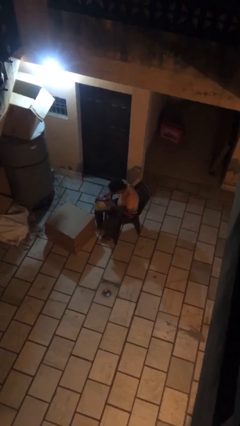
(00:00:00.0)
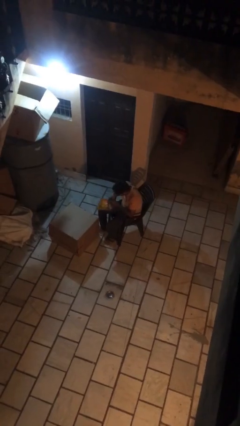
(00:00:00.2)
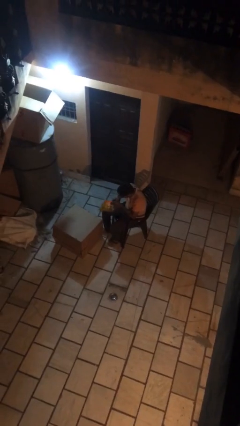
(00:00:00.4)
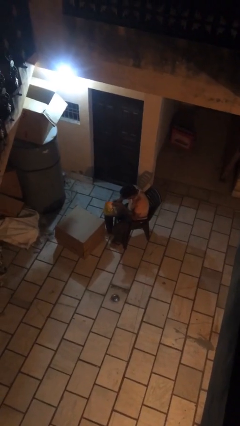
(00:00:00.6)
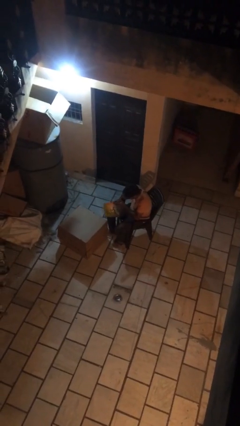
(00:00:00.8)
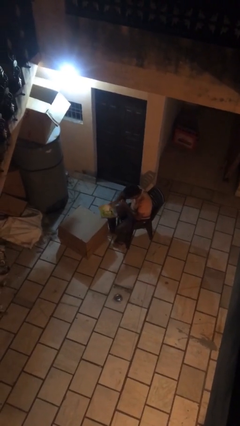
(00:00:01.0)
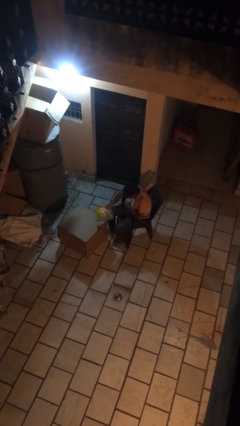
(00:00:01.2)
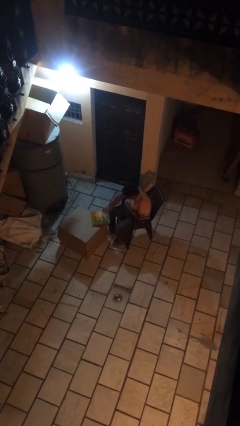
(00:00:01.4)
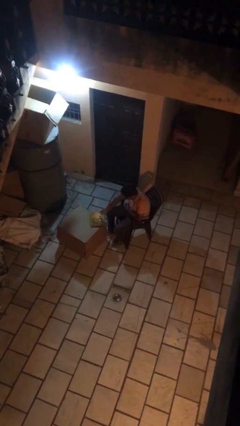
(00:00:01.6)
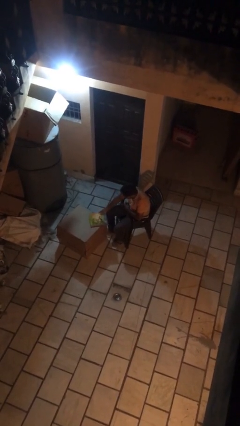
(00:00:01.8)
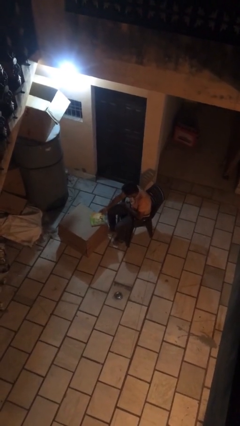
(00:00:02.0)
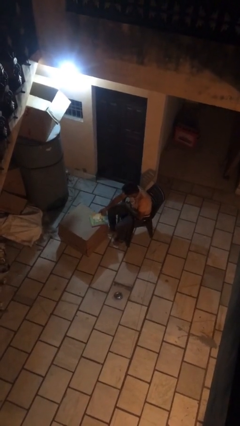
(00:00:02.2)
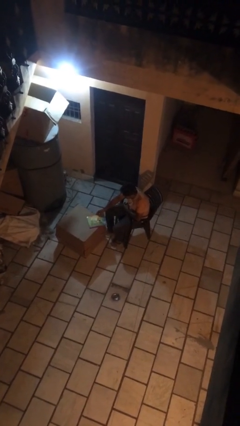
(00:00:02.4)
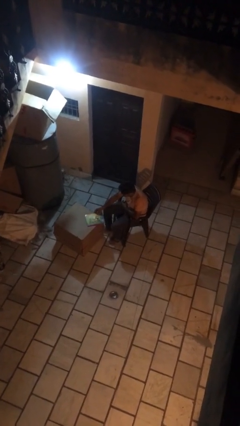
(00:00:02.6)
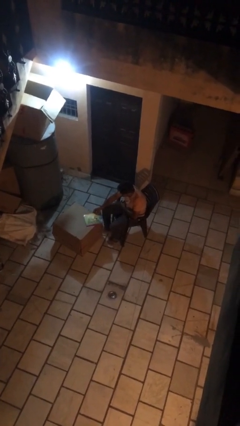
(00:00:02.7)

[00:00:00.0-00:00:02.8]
person puts down object on table

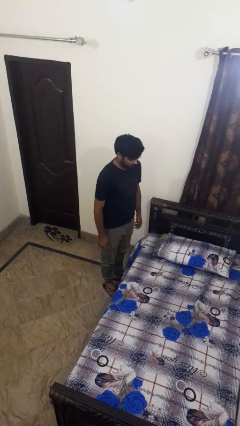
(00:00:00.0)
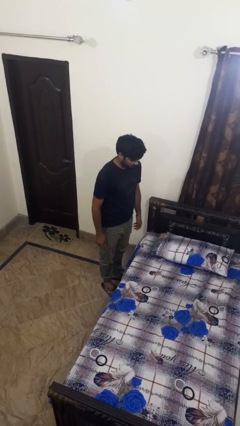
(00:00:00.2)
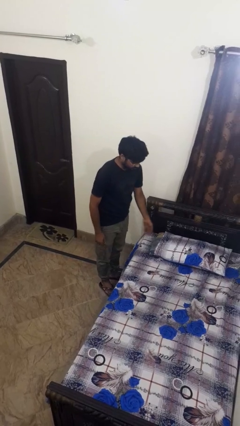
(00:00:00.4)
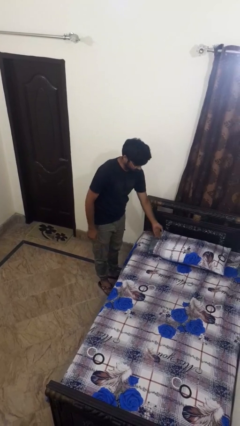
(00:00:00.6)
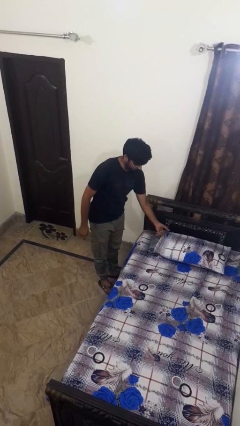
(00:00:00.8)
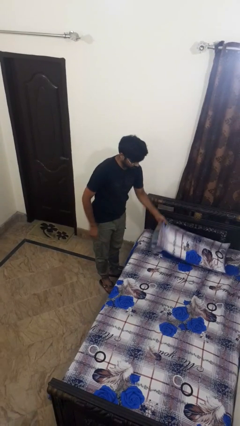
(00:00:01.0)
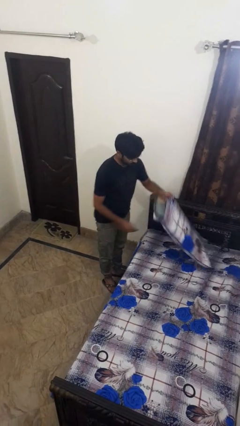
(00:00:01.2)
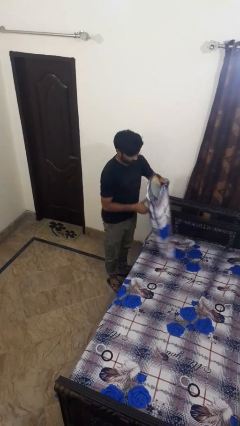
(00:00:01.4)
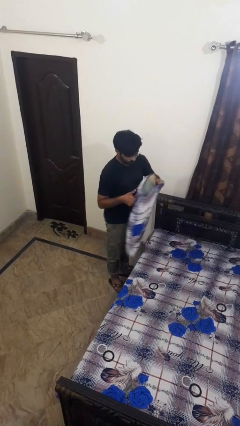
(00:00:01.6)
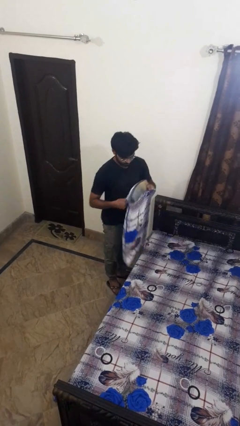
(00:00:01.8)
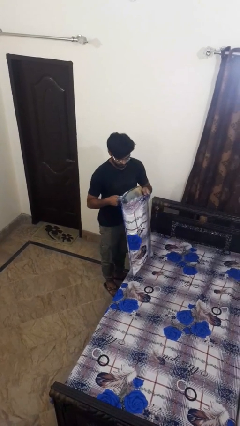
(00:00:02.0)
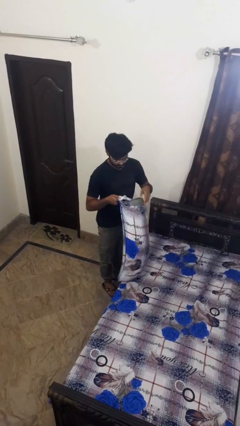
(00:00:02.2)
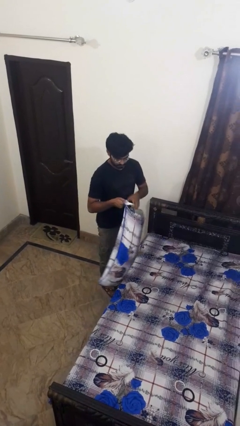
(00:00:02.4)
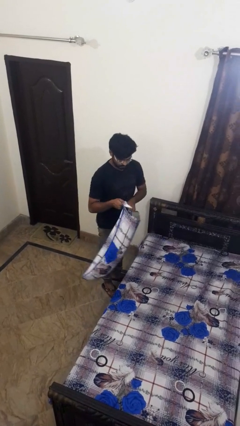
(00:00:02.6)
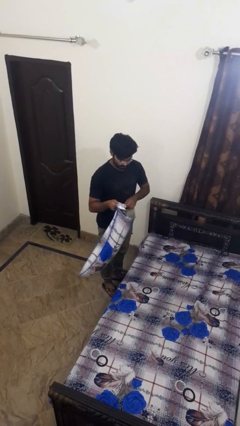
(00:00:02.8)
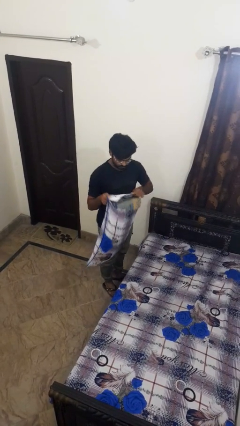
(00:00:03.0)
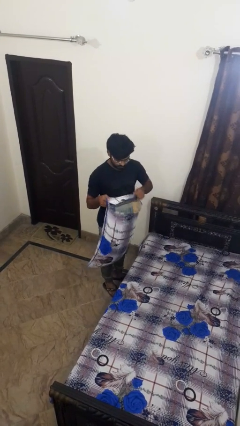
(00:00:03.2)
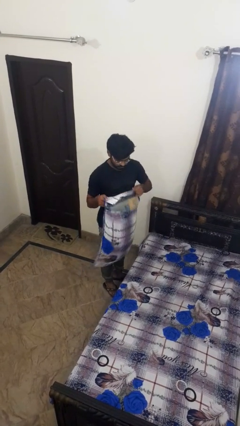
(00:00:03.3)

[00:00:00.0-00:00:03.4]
person picks up object from bed

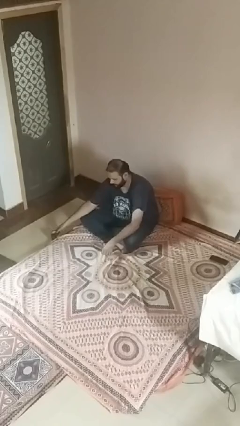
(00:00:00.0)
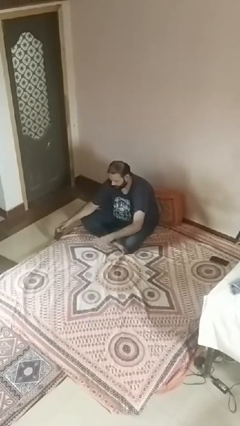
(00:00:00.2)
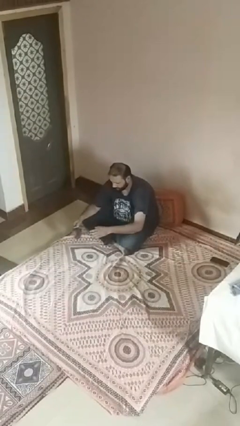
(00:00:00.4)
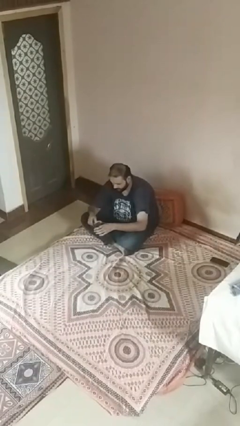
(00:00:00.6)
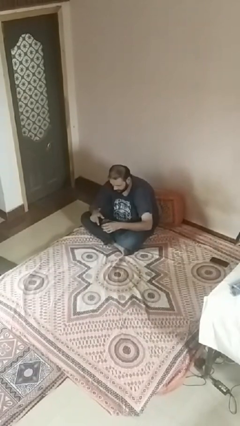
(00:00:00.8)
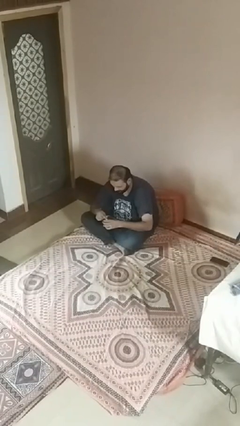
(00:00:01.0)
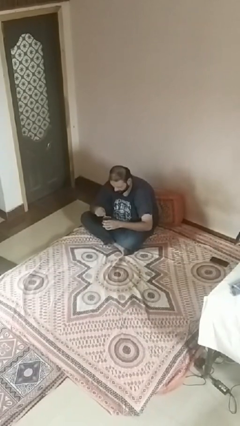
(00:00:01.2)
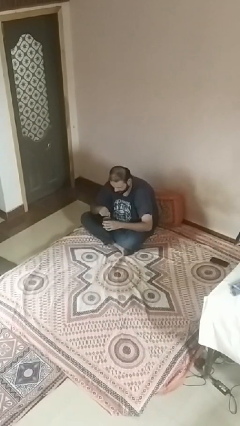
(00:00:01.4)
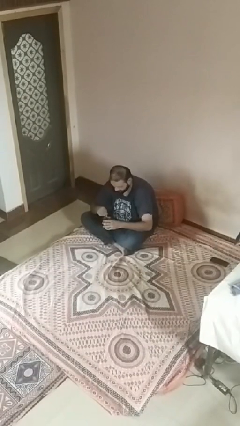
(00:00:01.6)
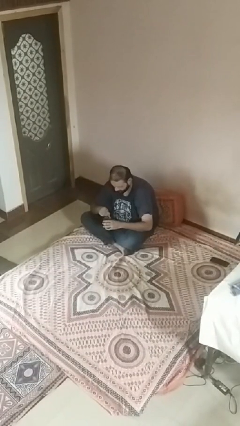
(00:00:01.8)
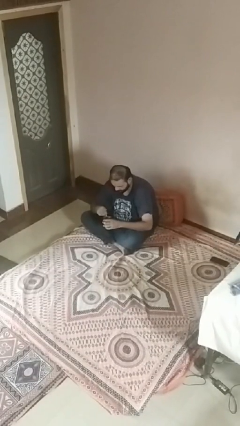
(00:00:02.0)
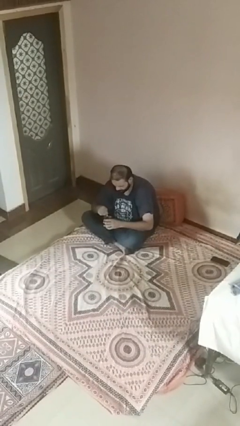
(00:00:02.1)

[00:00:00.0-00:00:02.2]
person stirs mug

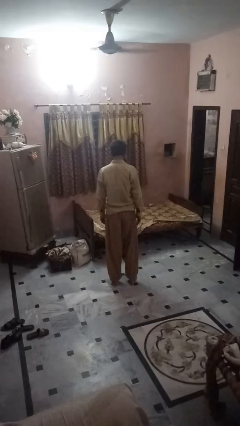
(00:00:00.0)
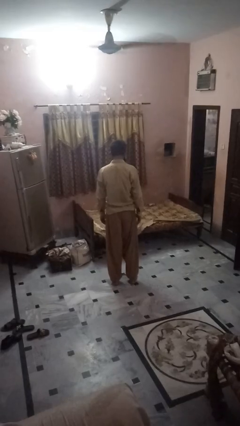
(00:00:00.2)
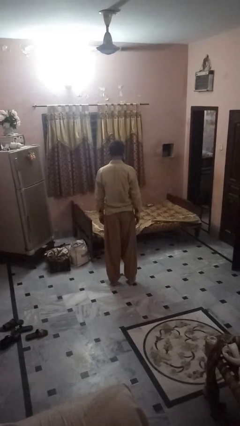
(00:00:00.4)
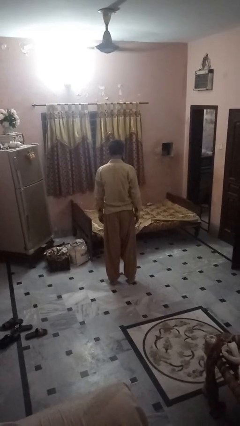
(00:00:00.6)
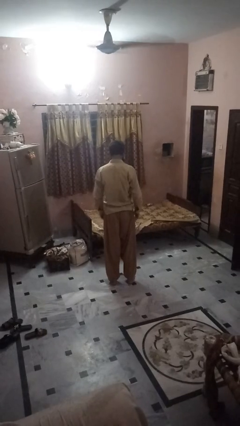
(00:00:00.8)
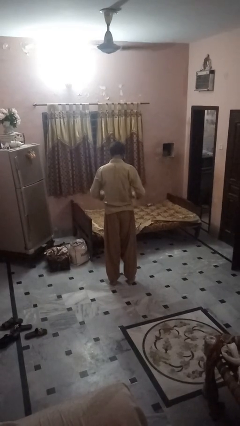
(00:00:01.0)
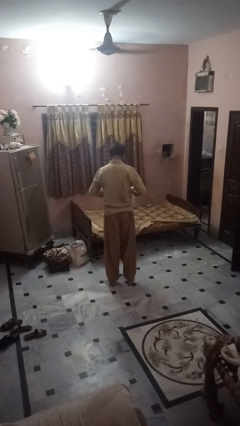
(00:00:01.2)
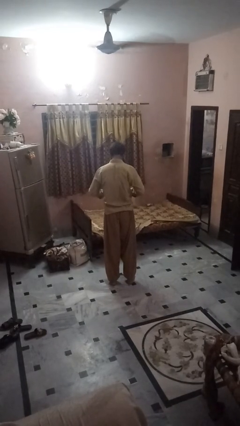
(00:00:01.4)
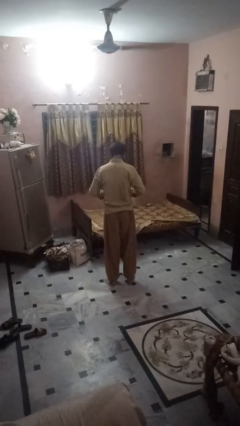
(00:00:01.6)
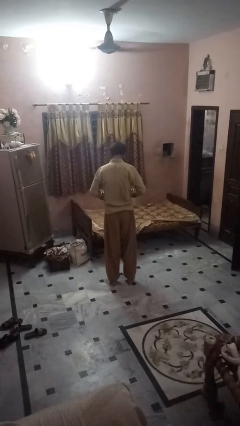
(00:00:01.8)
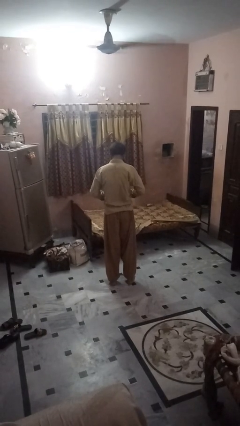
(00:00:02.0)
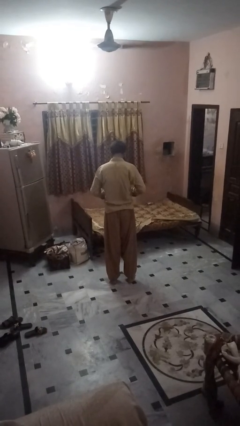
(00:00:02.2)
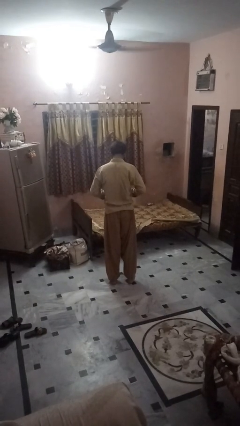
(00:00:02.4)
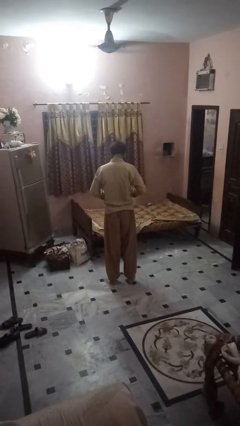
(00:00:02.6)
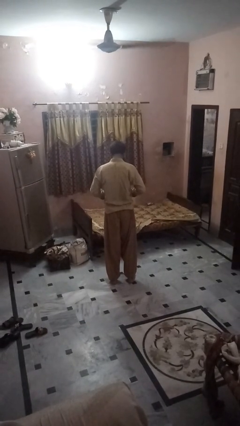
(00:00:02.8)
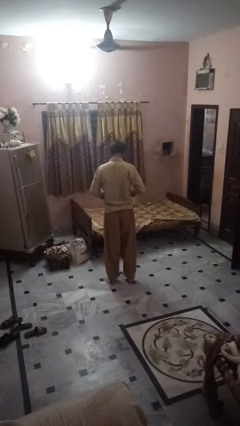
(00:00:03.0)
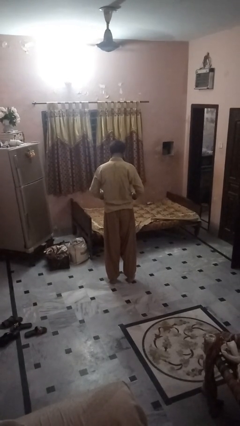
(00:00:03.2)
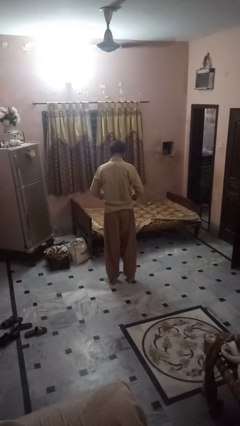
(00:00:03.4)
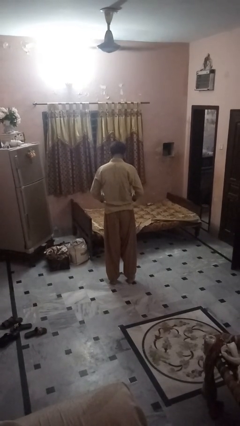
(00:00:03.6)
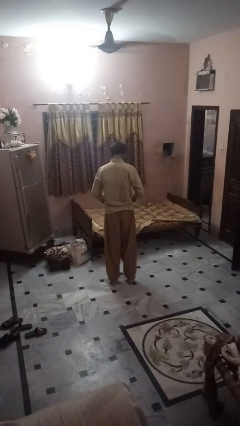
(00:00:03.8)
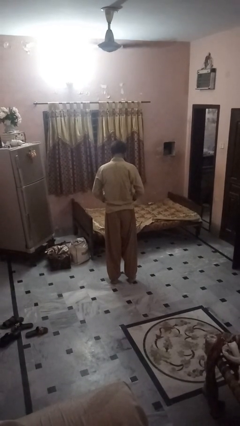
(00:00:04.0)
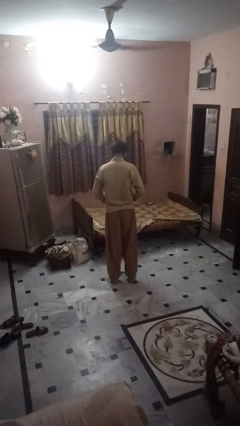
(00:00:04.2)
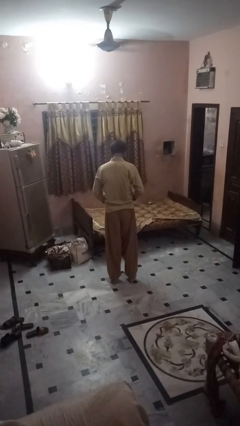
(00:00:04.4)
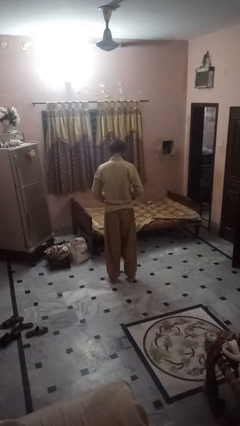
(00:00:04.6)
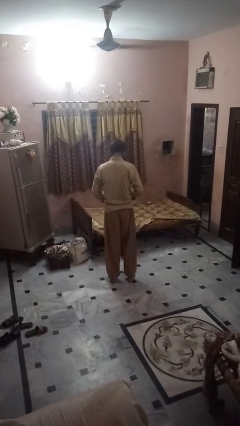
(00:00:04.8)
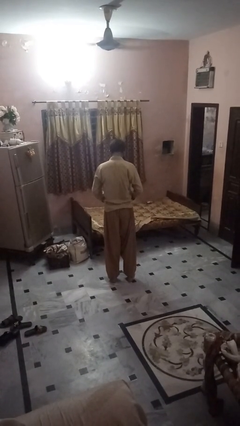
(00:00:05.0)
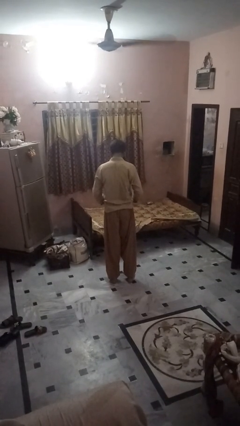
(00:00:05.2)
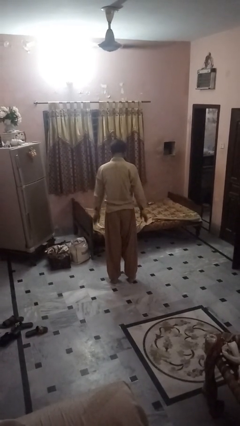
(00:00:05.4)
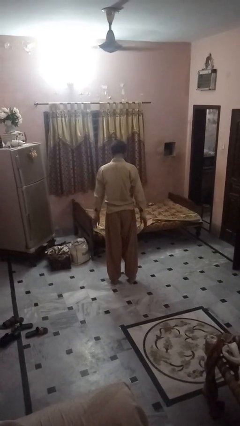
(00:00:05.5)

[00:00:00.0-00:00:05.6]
person buttons shirt

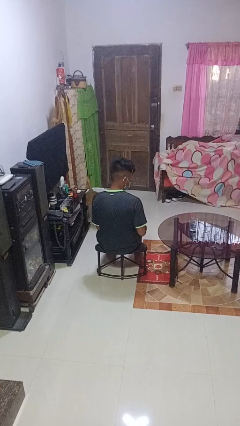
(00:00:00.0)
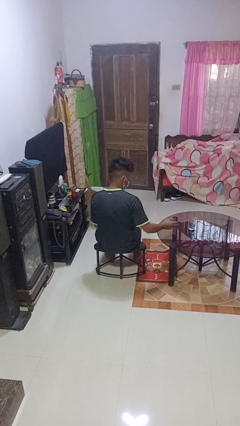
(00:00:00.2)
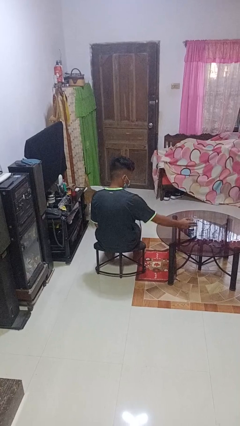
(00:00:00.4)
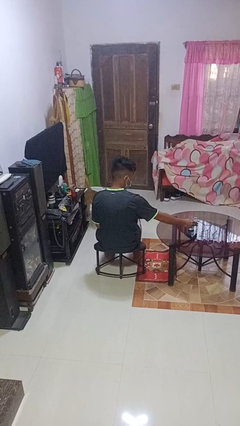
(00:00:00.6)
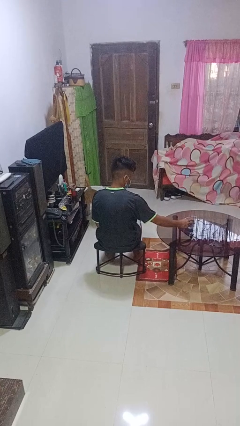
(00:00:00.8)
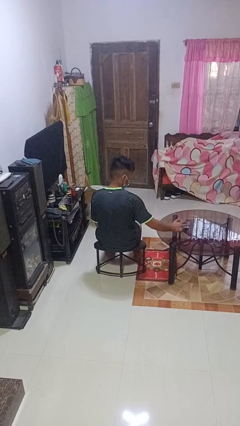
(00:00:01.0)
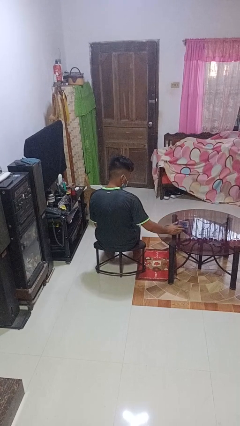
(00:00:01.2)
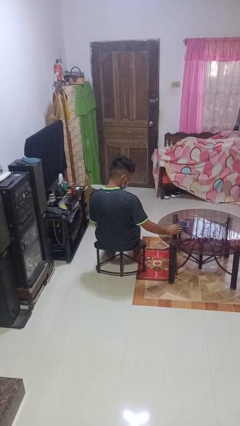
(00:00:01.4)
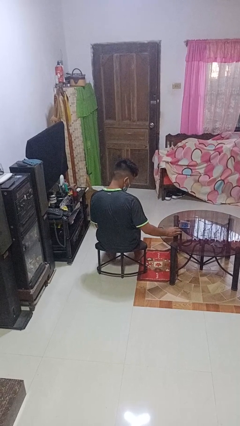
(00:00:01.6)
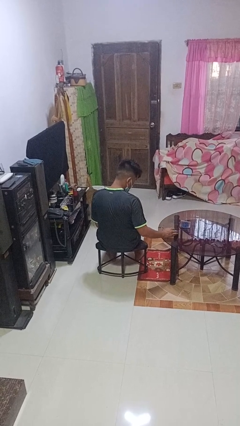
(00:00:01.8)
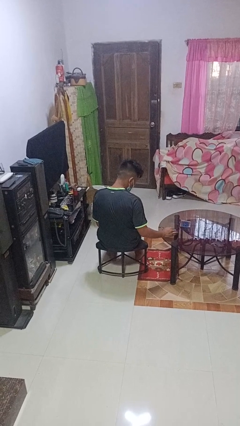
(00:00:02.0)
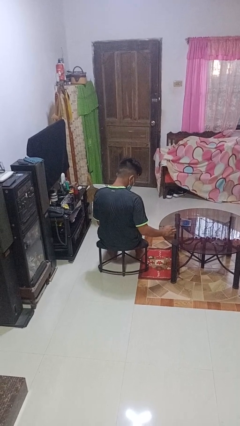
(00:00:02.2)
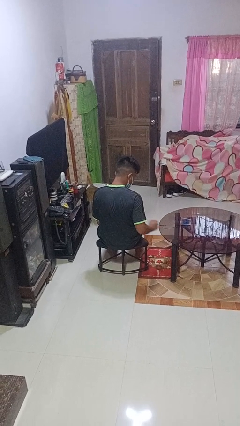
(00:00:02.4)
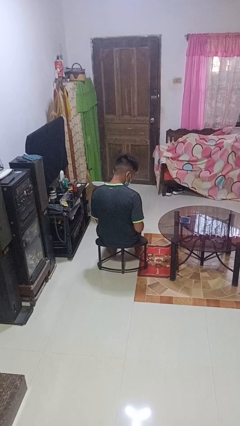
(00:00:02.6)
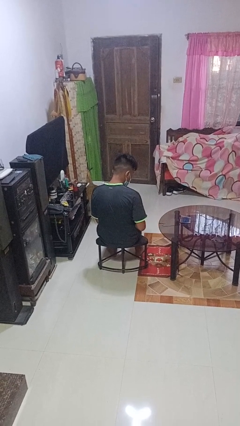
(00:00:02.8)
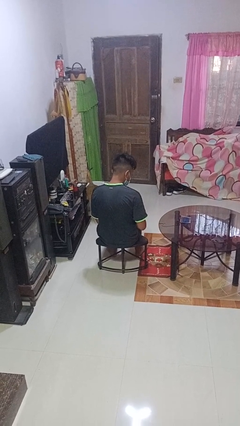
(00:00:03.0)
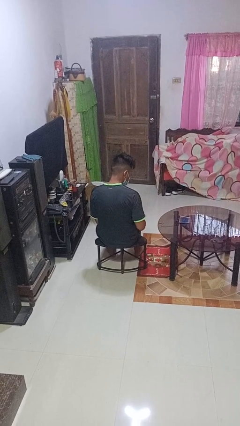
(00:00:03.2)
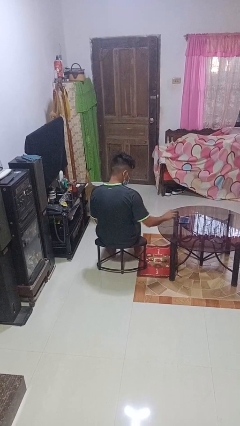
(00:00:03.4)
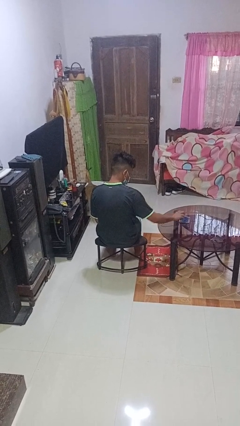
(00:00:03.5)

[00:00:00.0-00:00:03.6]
person spills on table
